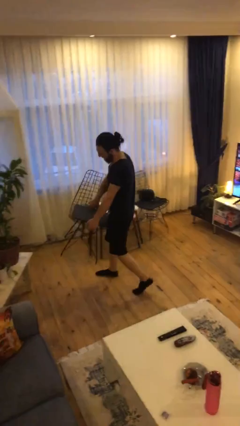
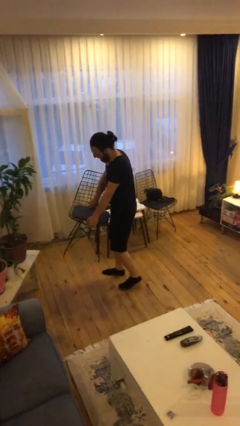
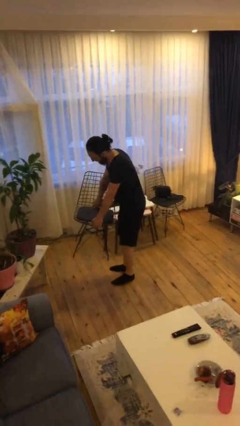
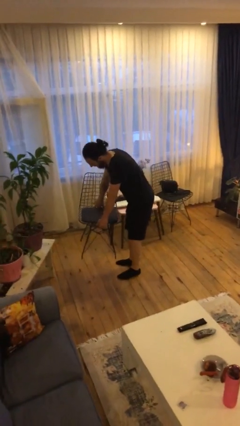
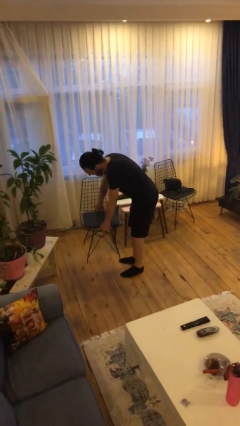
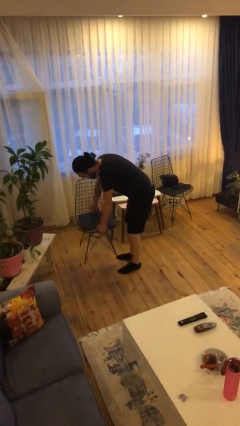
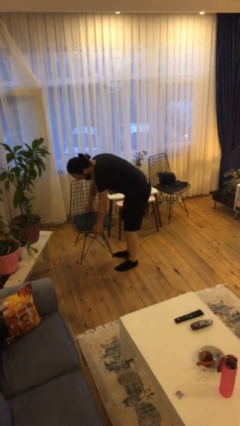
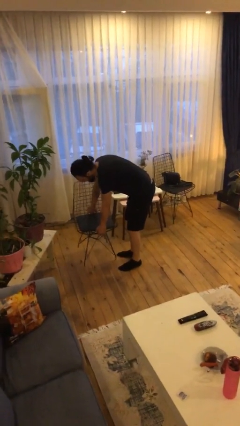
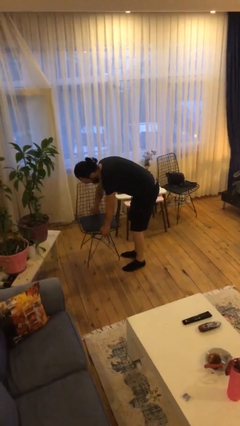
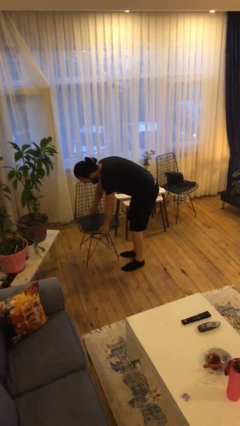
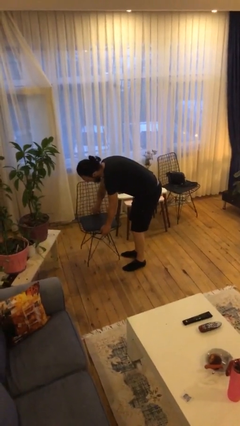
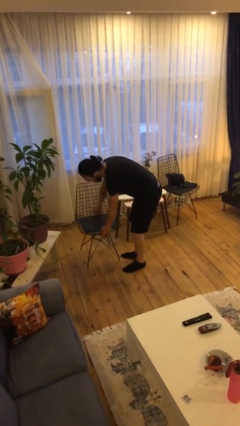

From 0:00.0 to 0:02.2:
person puts down object on floor

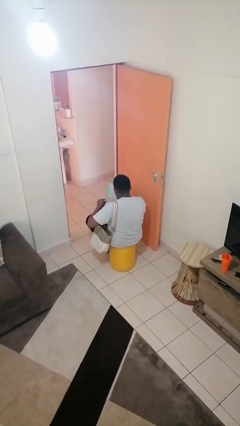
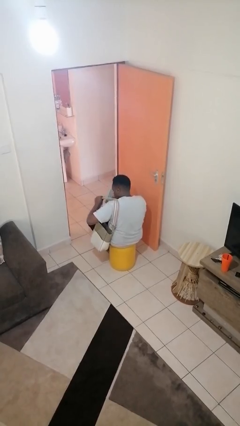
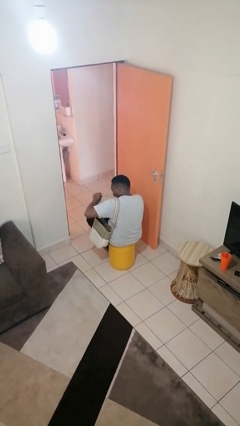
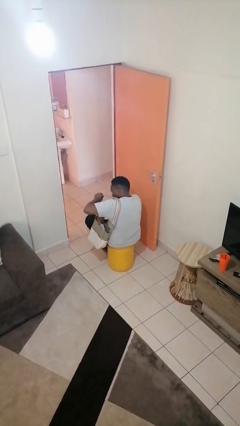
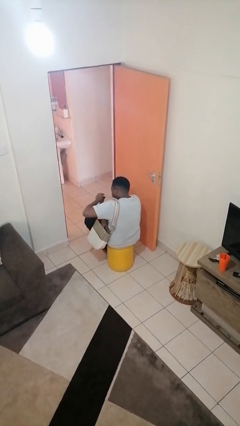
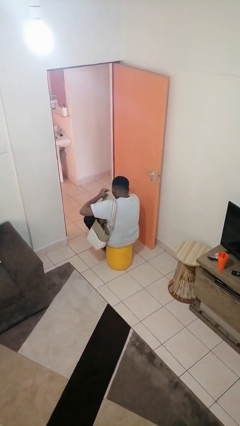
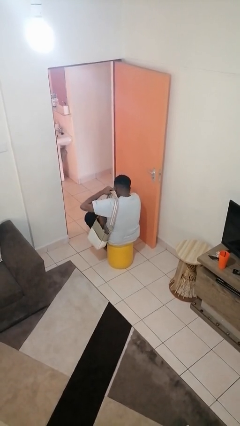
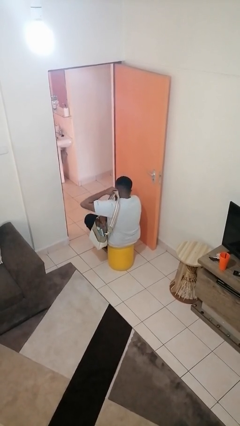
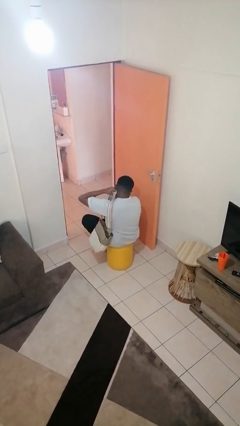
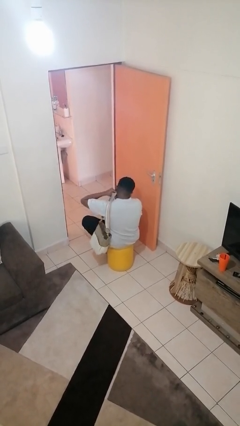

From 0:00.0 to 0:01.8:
person puts object into purse

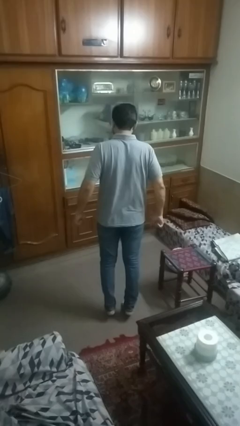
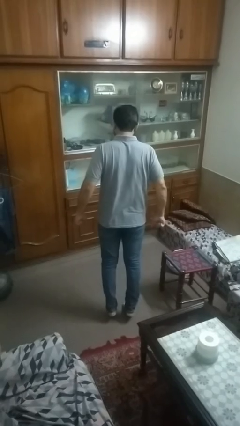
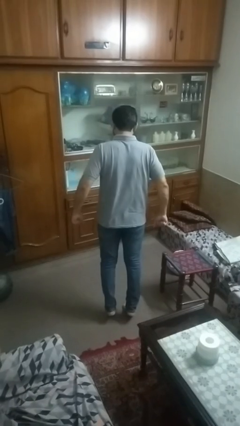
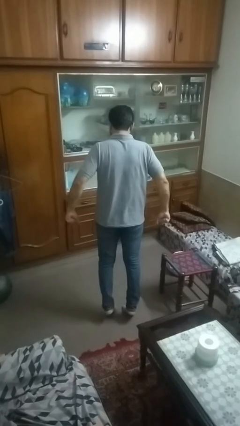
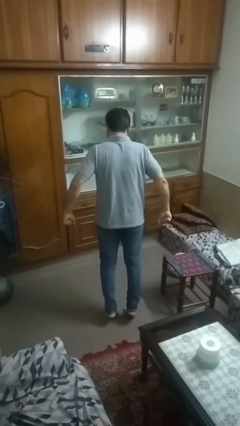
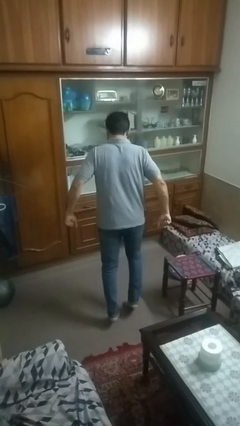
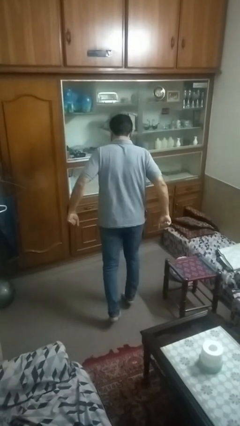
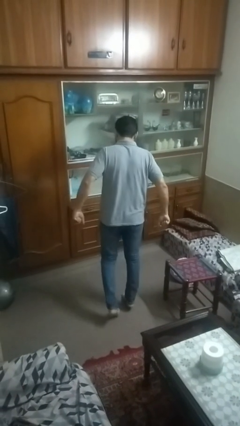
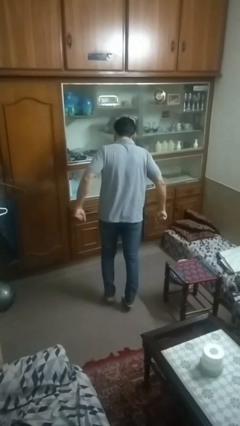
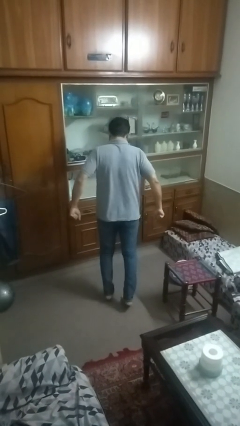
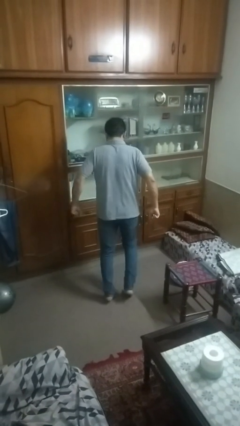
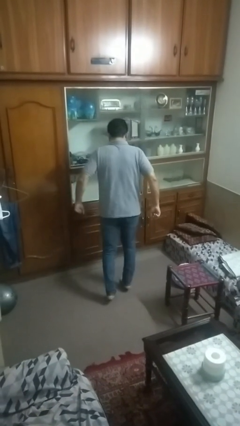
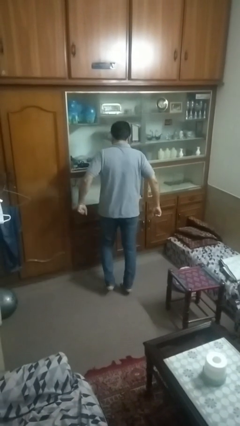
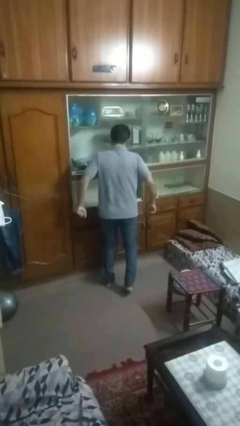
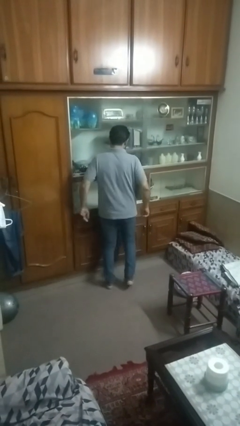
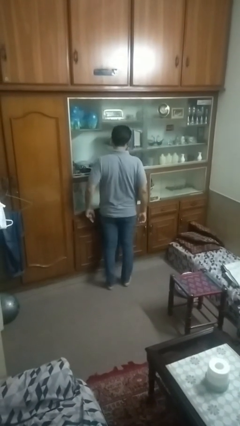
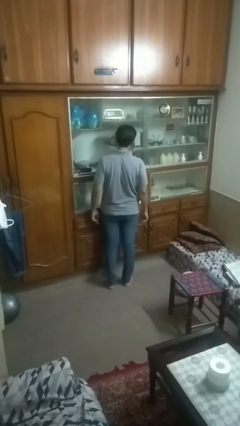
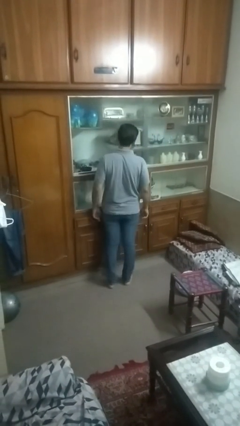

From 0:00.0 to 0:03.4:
person walks tiptoe

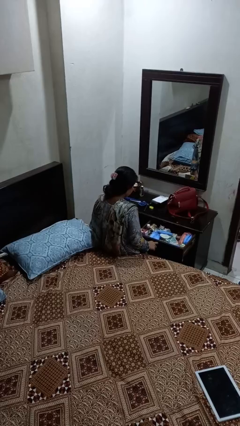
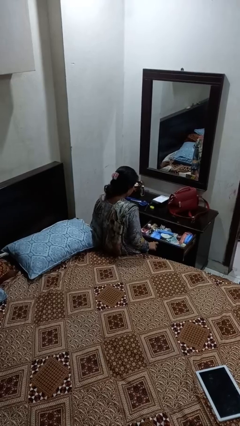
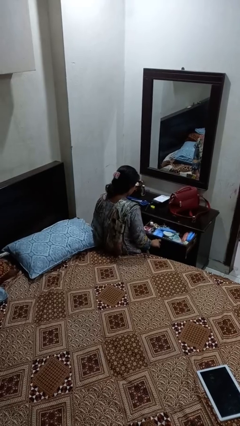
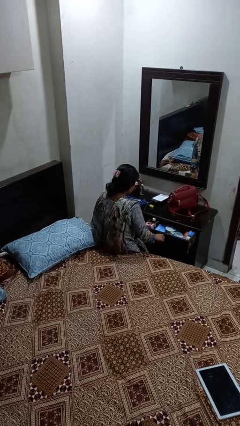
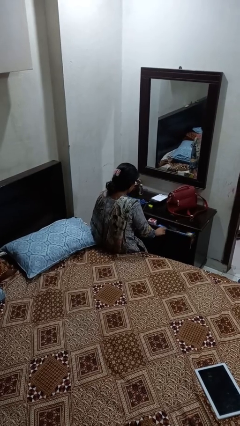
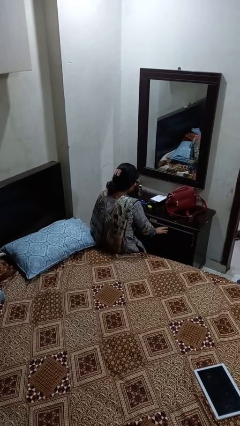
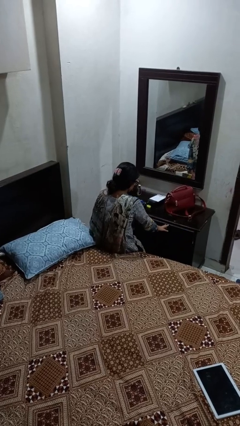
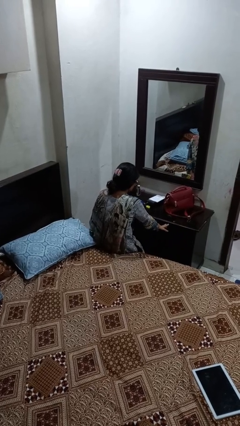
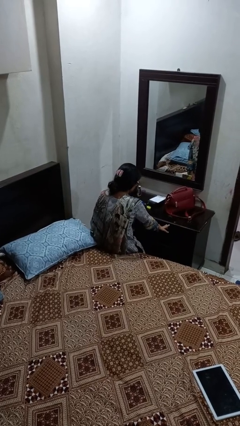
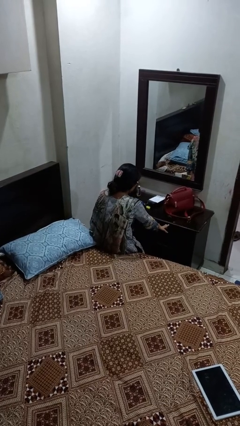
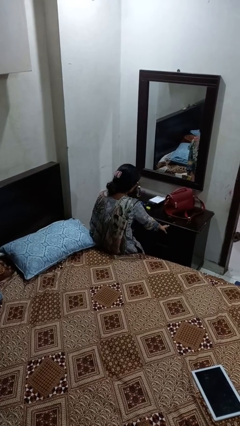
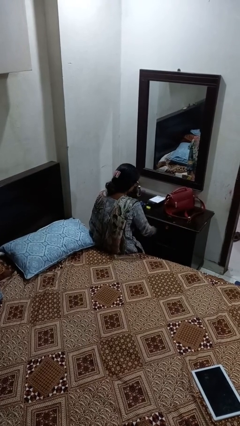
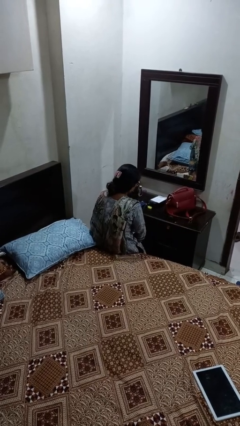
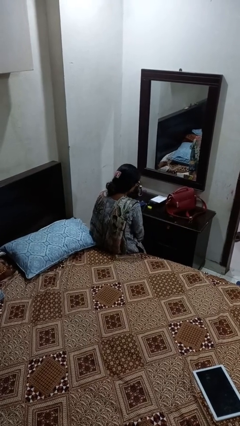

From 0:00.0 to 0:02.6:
person closes dresser drawer

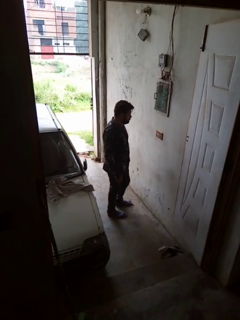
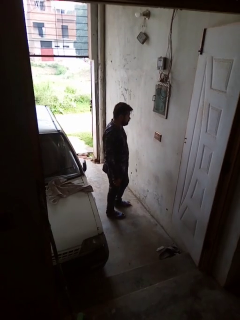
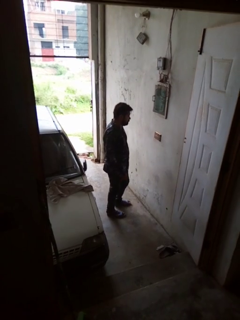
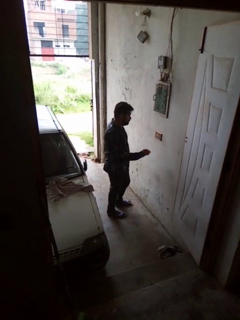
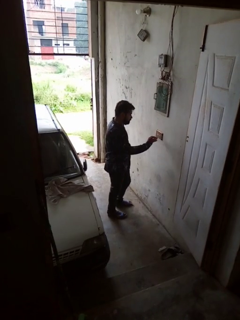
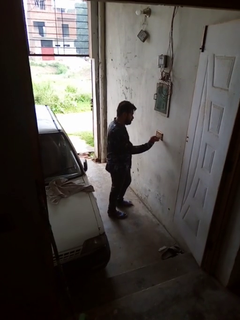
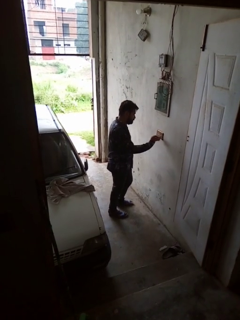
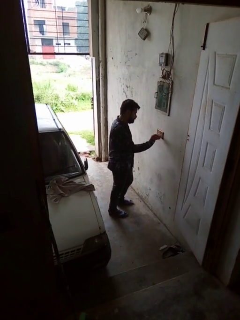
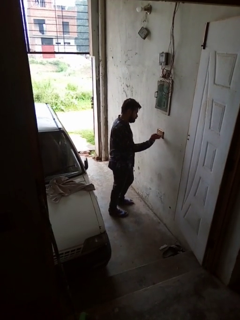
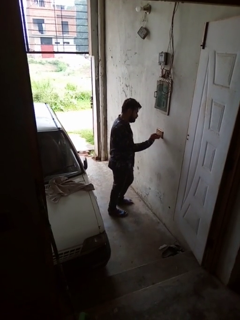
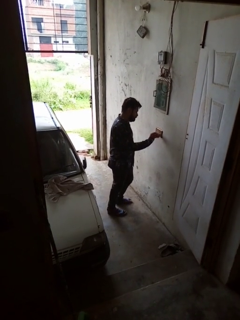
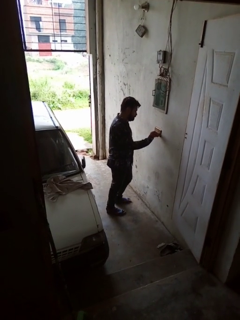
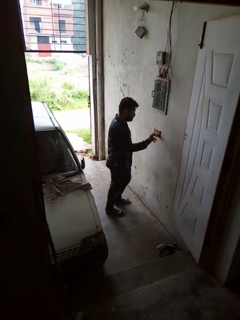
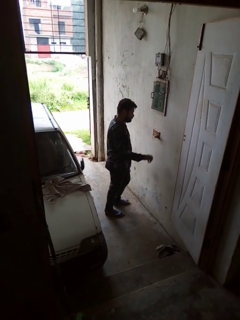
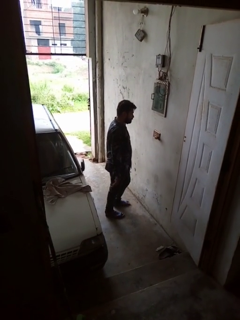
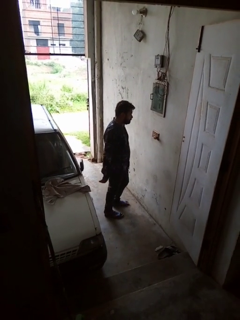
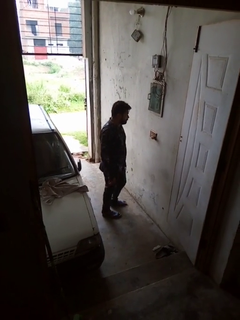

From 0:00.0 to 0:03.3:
person plugs into electrical socket

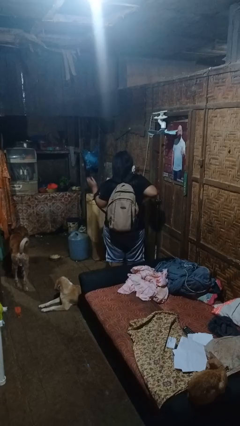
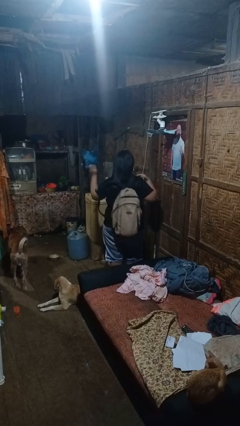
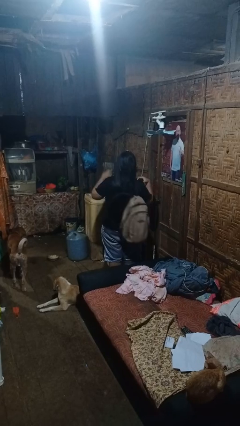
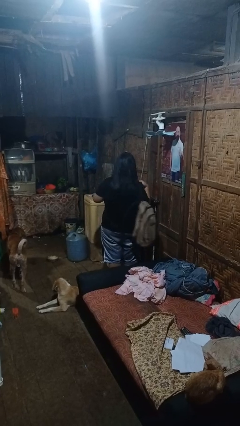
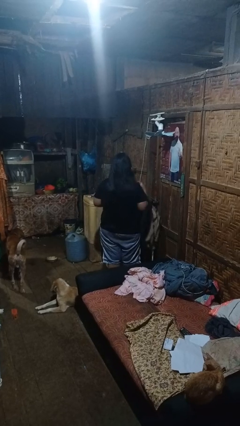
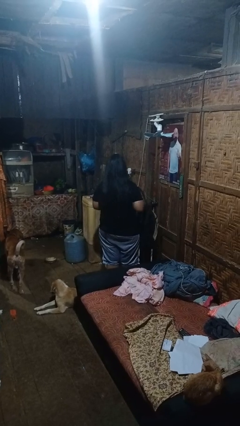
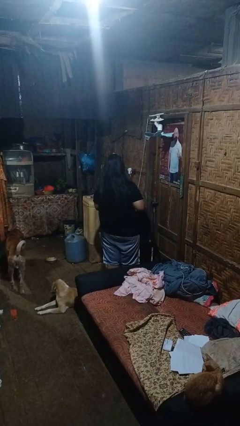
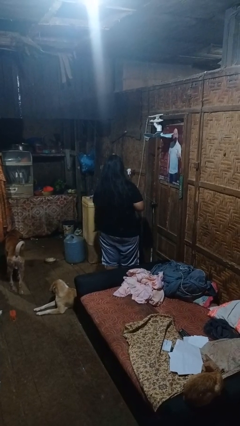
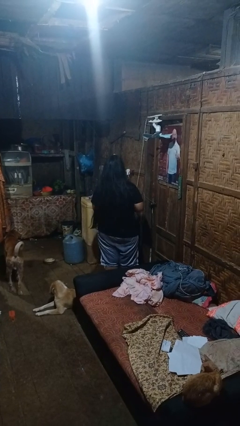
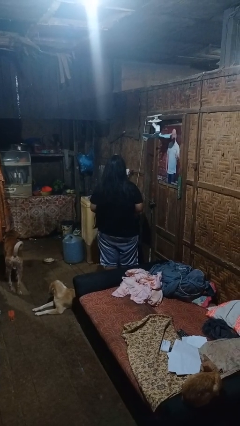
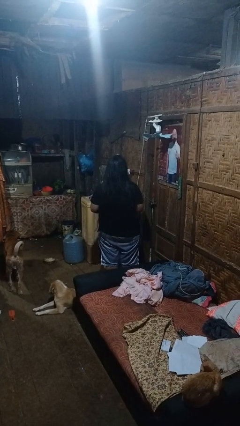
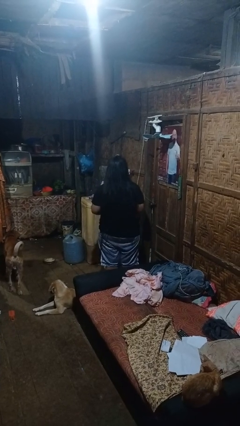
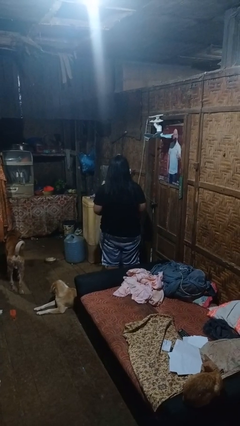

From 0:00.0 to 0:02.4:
person takes off backpack

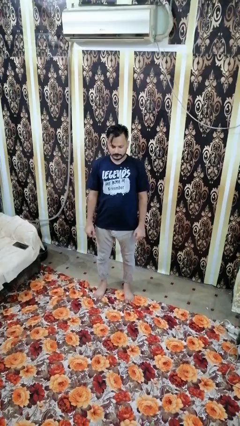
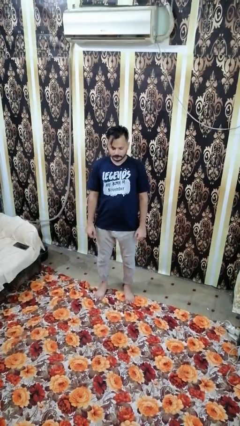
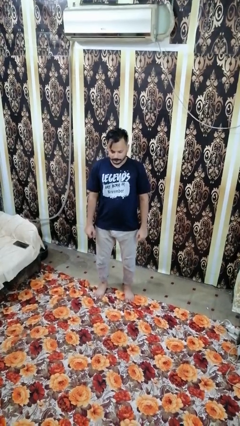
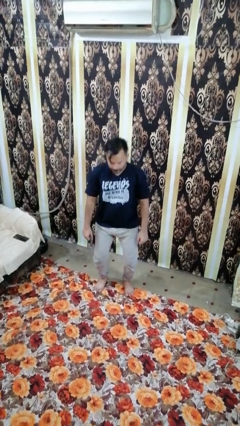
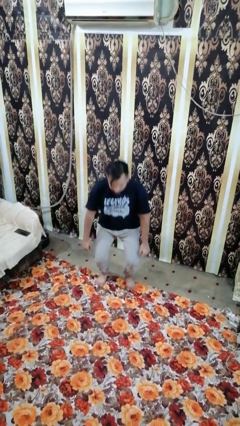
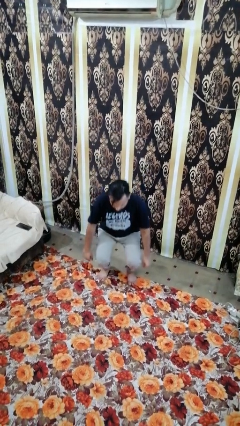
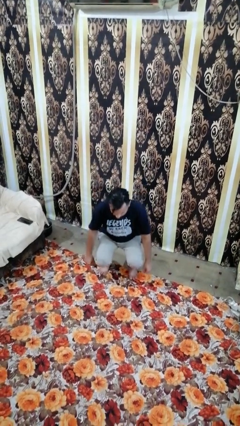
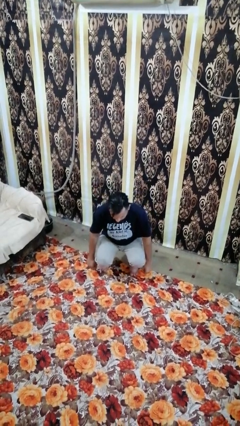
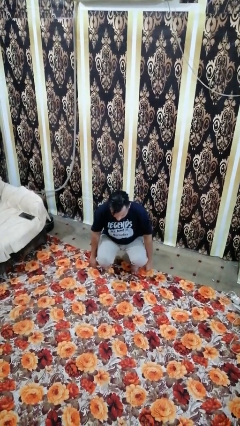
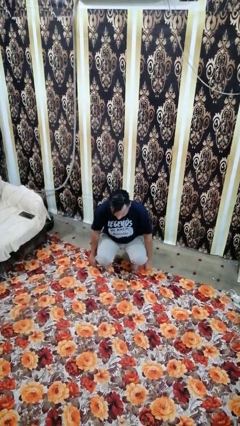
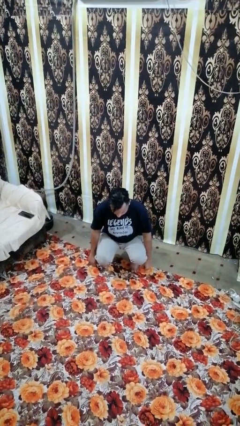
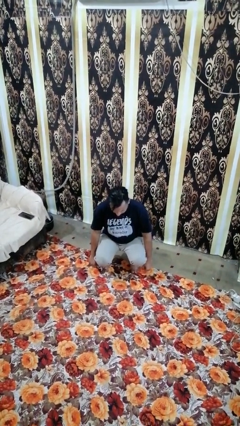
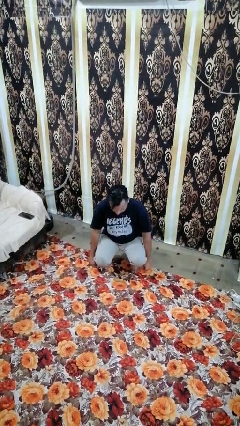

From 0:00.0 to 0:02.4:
person squats
